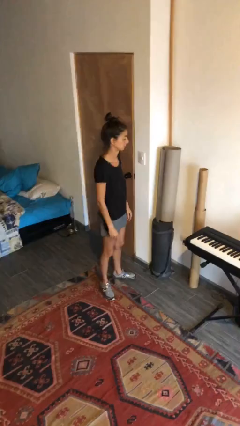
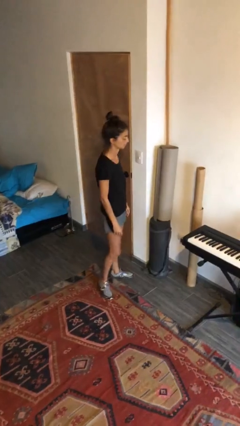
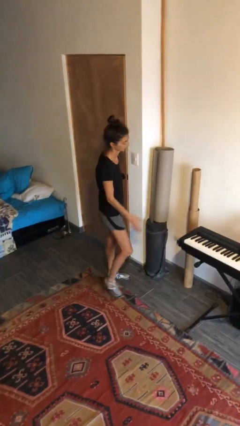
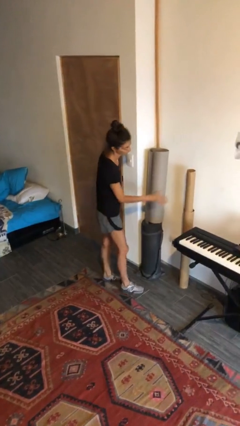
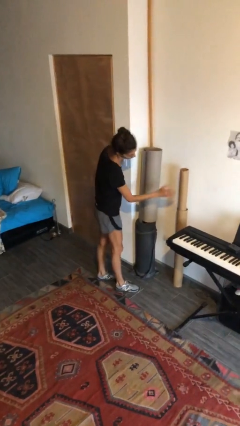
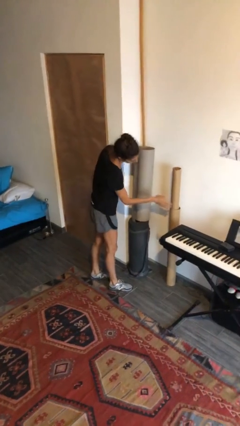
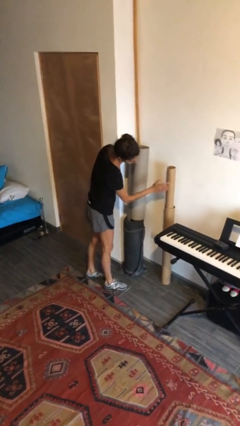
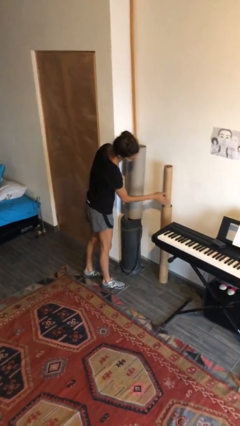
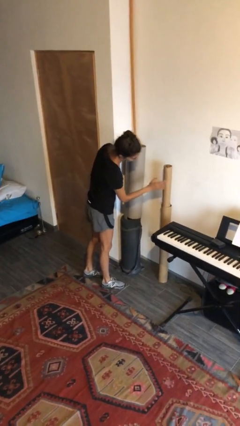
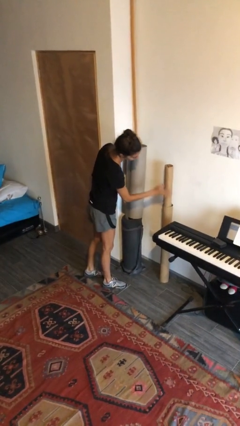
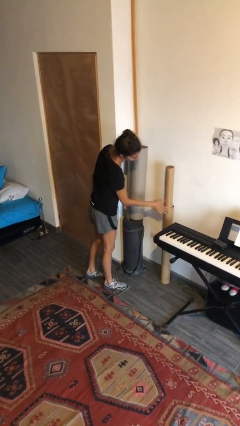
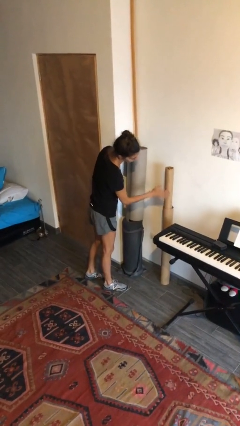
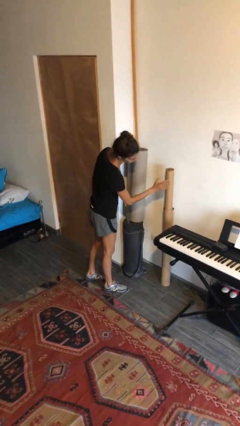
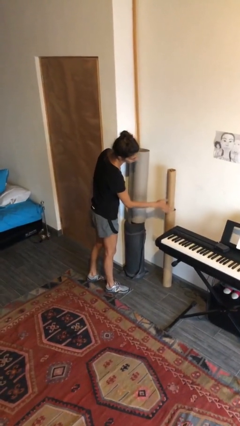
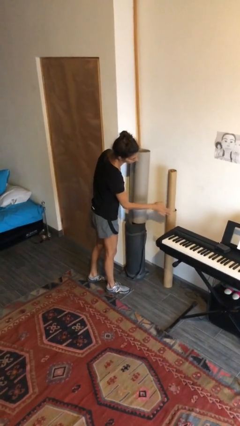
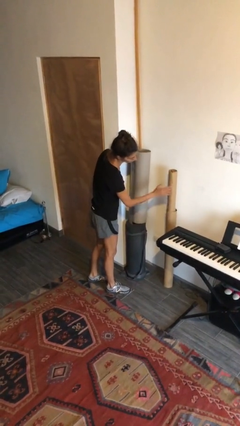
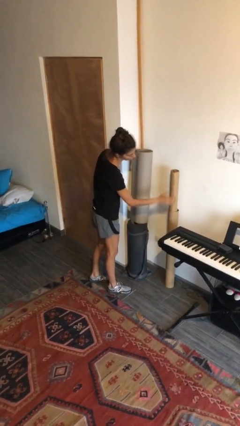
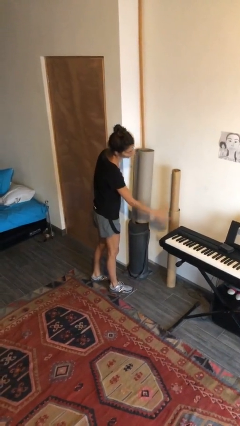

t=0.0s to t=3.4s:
person waves hand over object

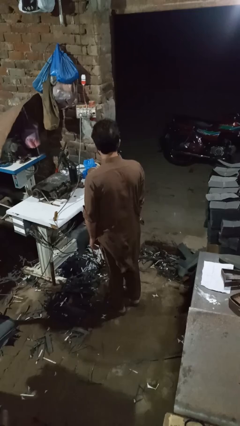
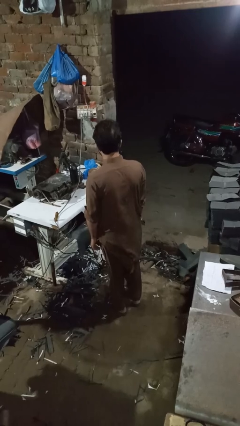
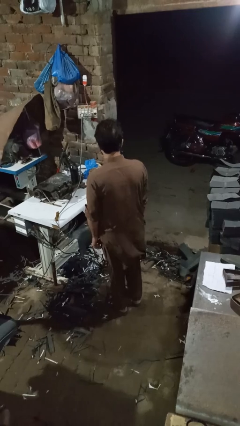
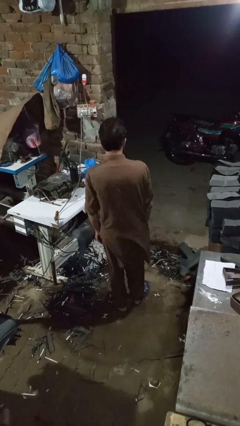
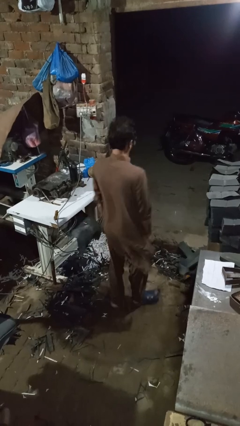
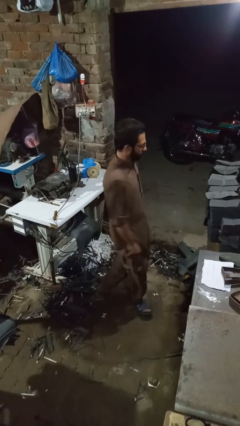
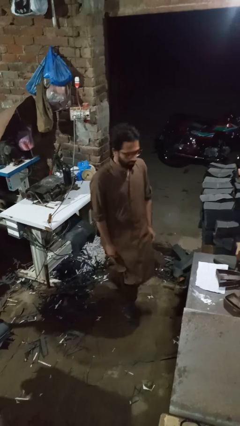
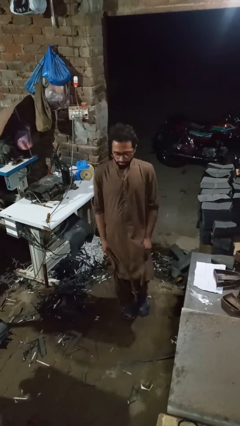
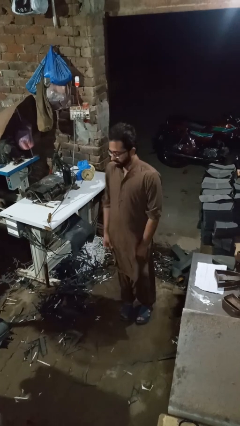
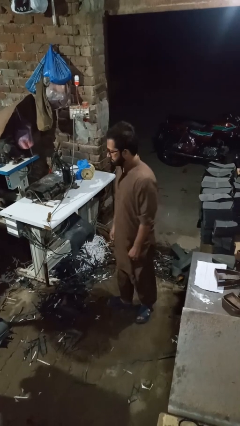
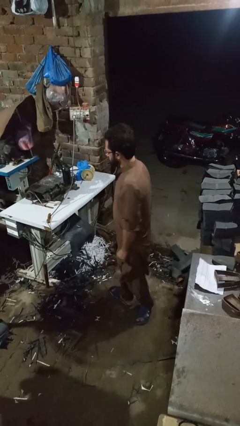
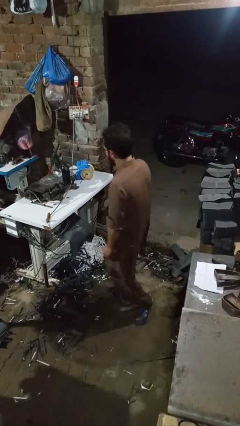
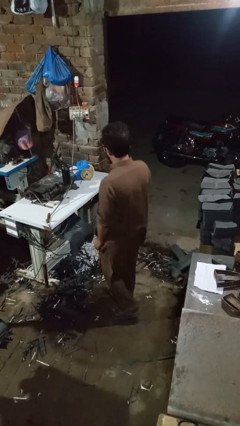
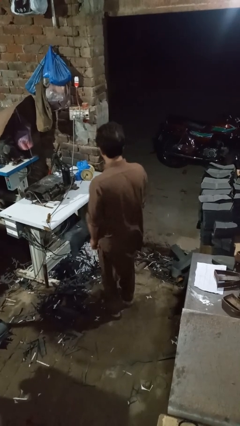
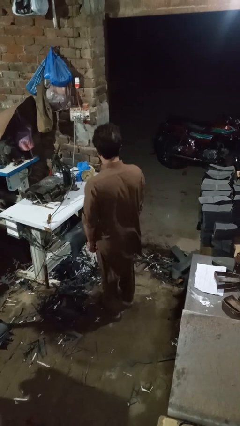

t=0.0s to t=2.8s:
person twirls

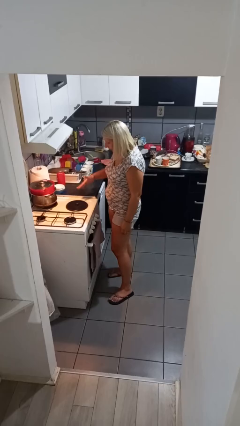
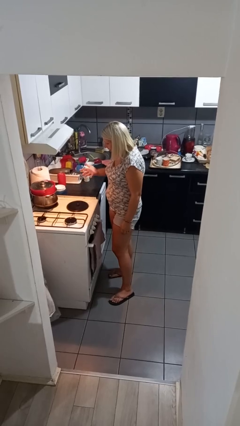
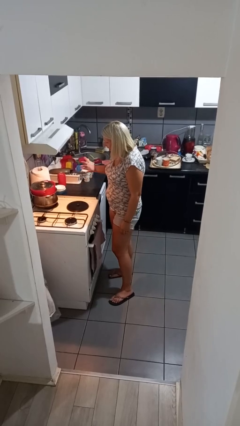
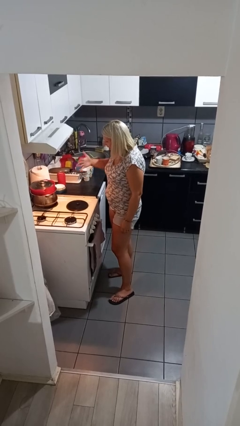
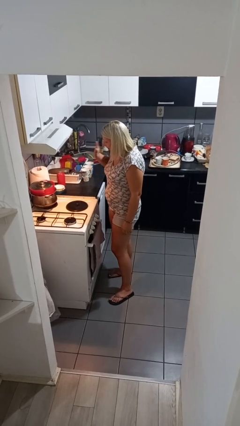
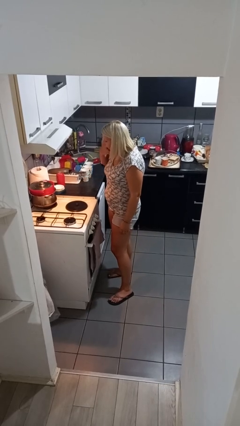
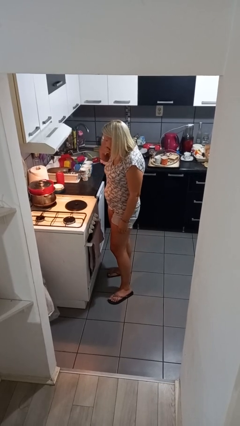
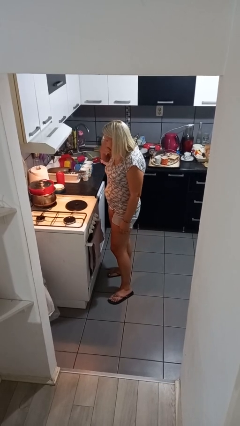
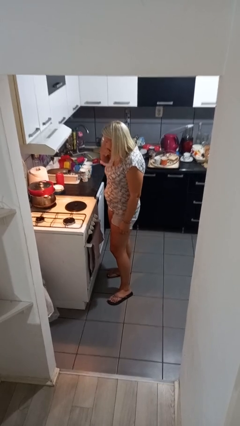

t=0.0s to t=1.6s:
person burns hand

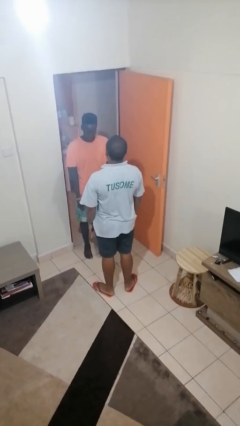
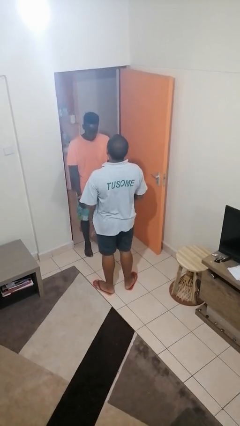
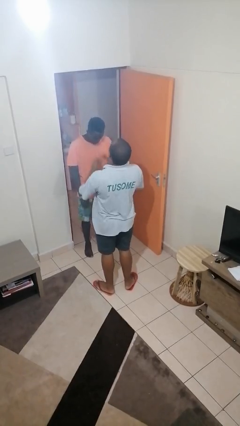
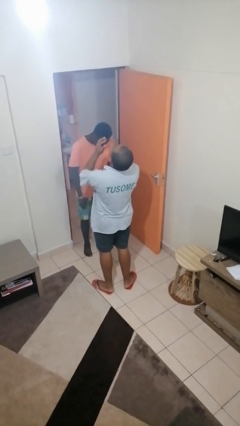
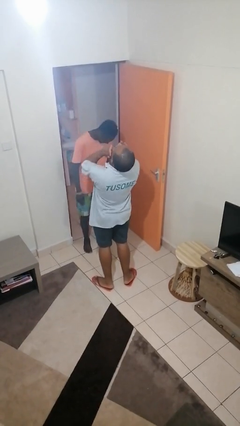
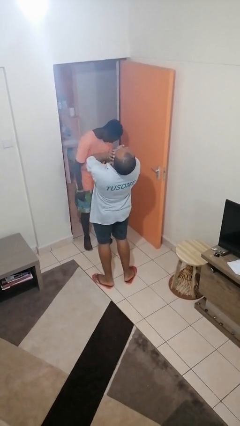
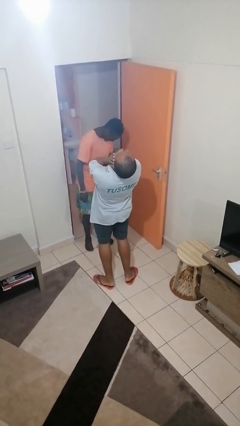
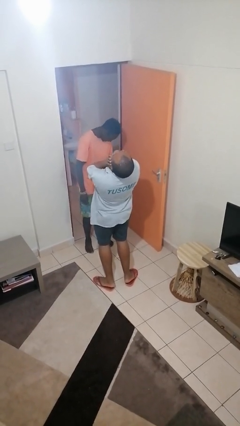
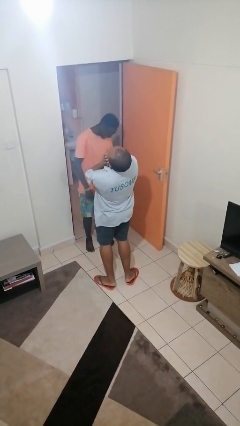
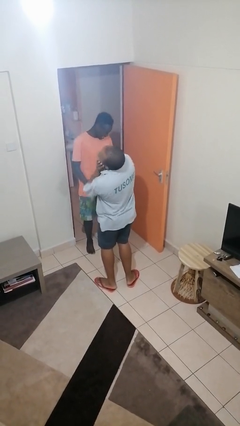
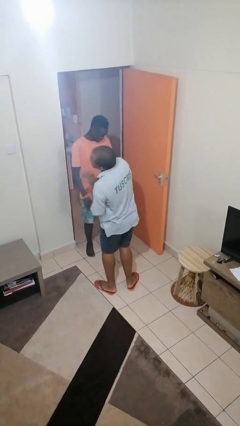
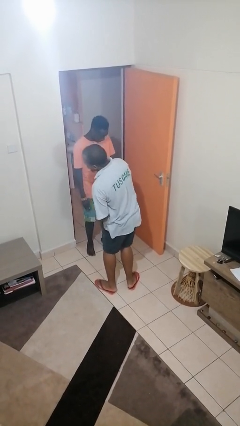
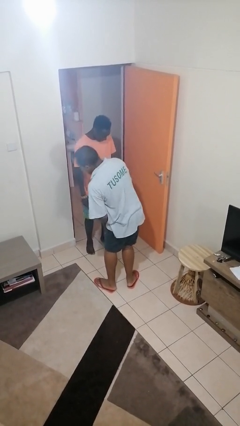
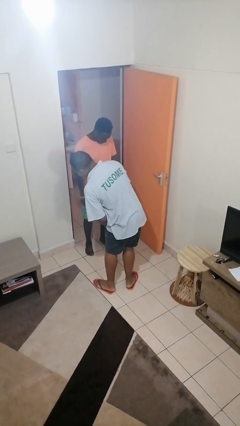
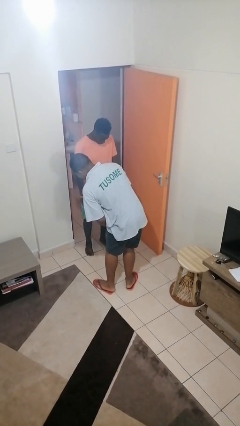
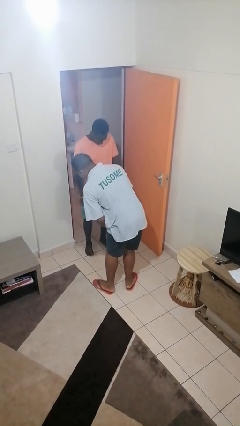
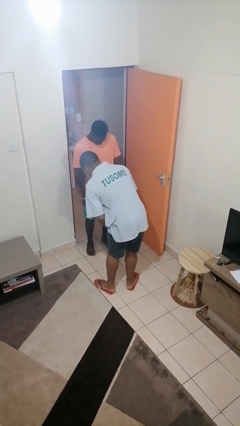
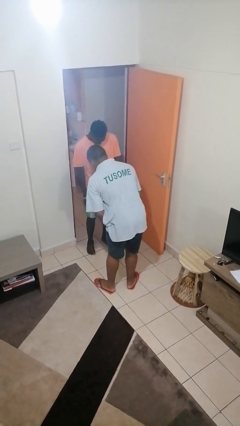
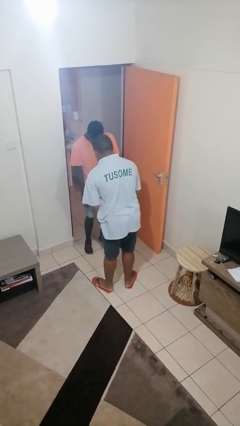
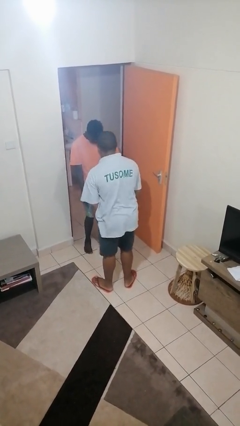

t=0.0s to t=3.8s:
person laughs with person

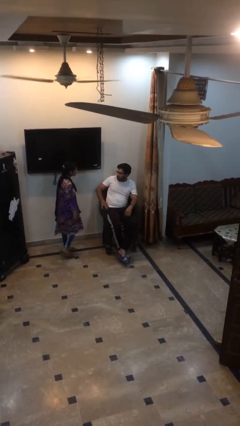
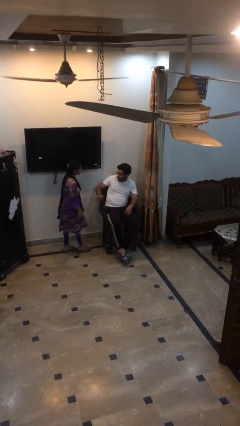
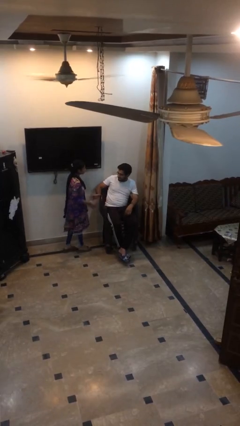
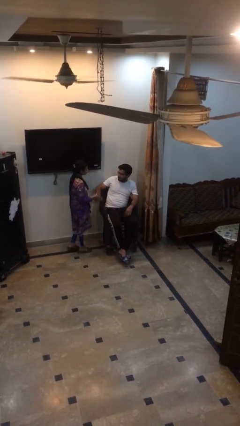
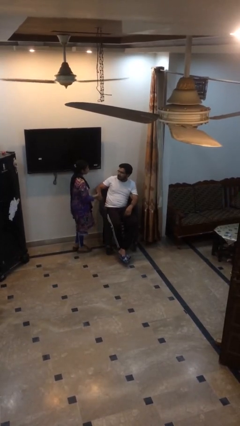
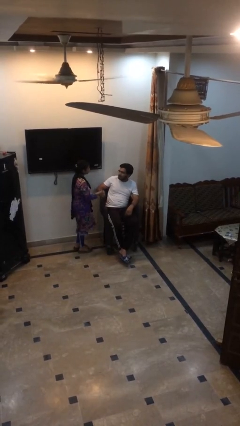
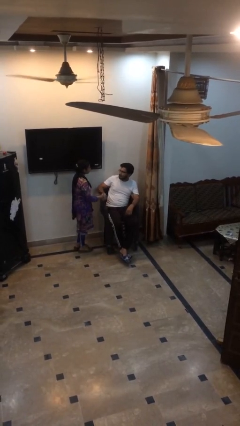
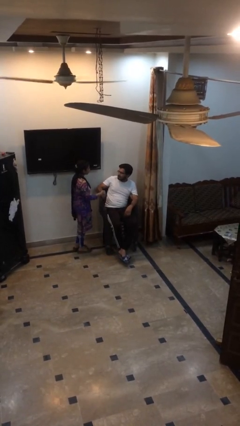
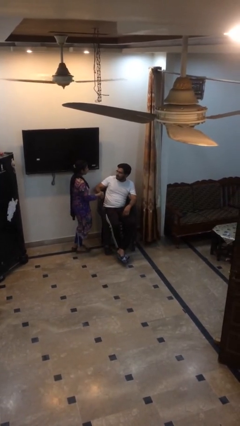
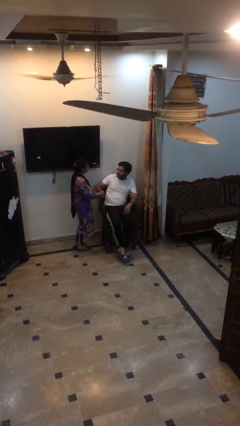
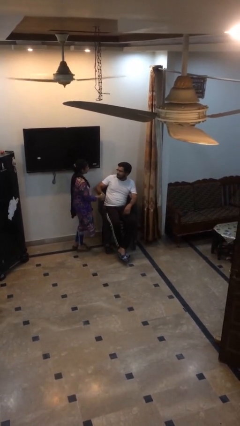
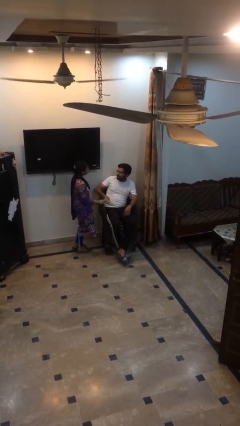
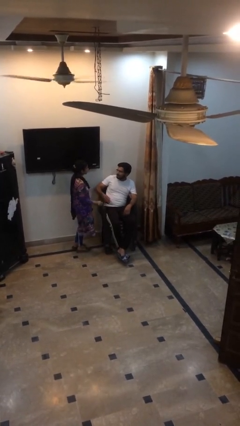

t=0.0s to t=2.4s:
person shakes hand

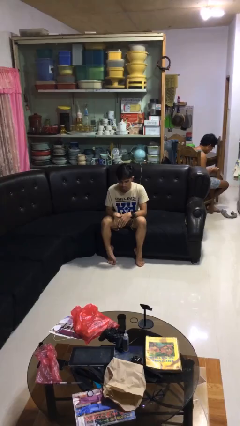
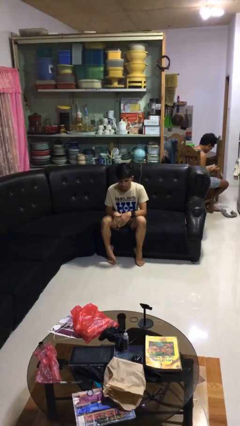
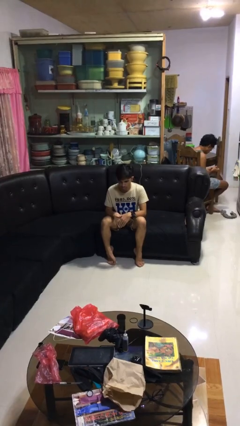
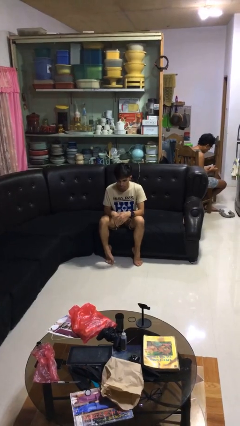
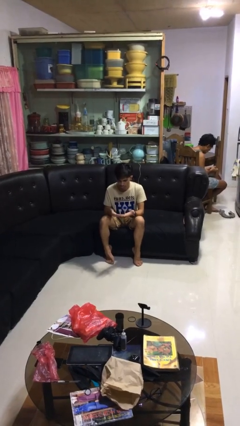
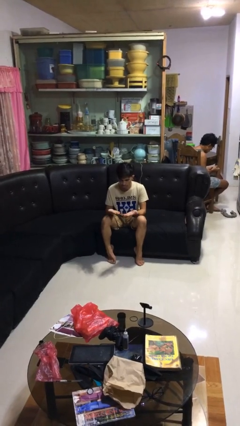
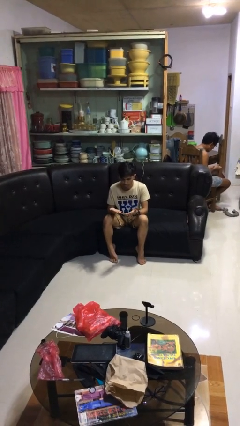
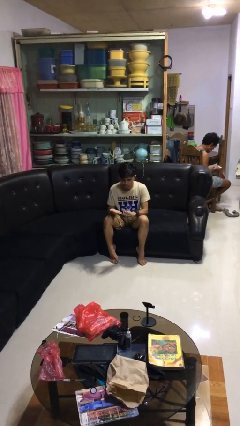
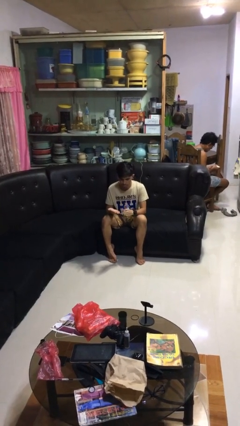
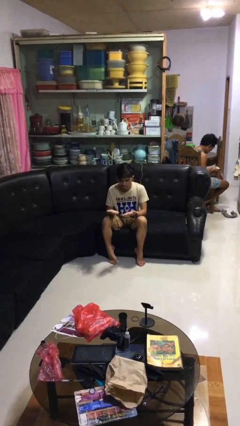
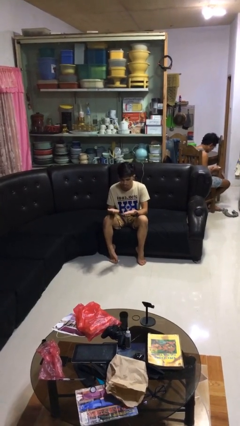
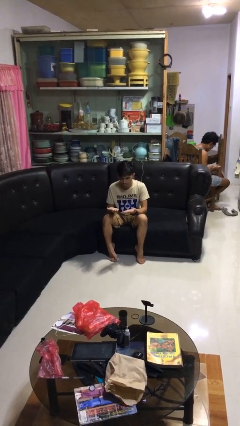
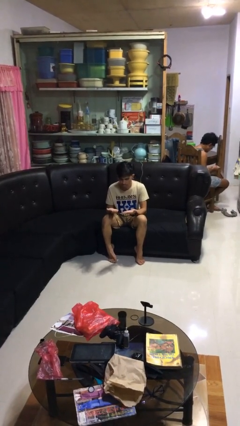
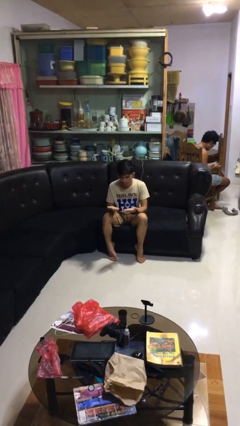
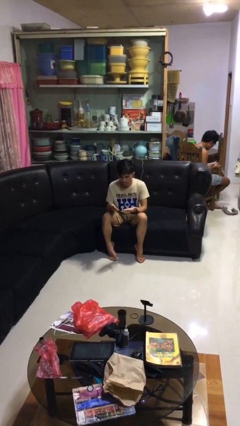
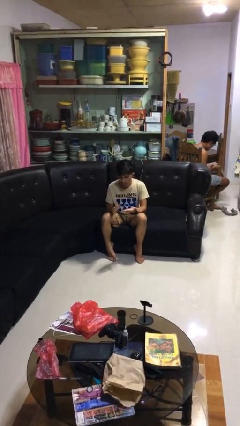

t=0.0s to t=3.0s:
person looks at hands in lap

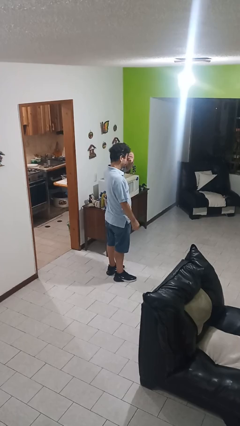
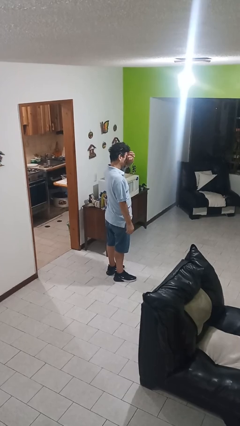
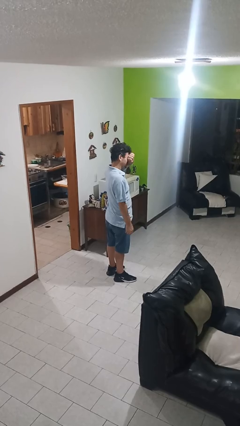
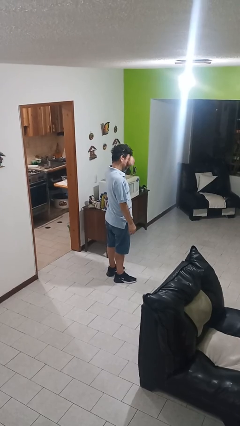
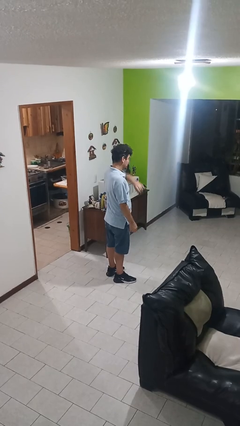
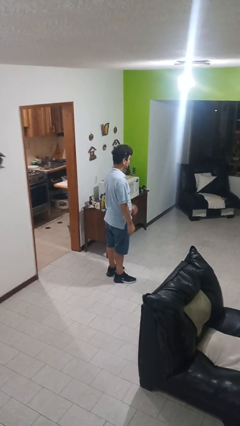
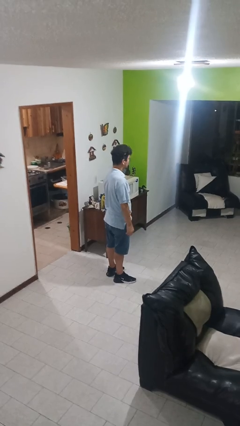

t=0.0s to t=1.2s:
person rubs eyes
